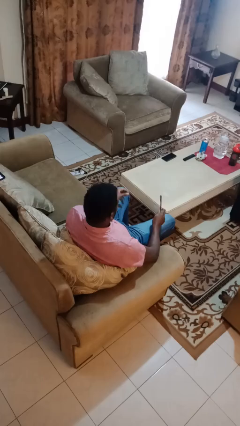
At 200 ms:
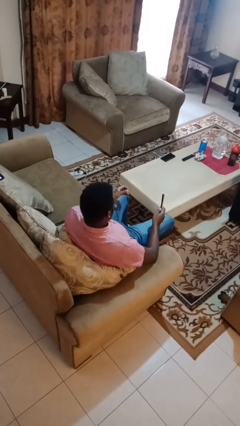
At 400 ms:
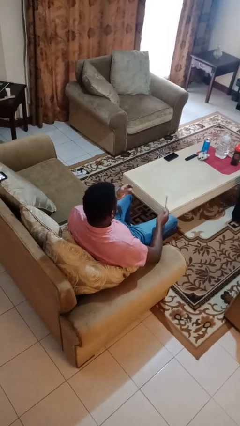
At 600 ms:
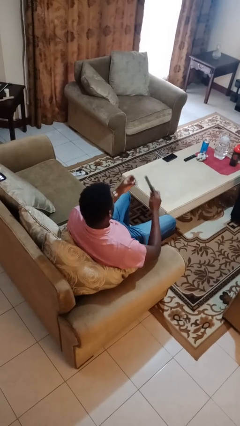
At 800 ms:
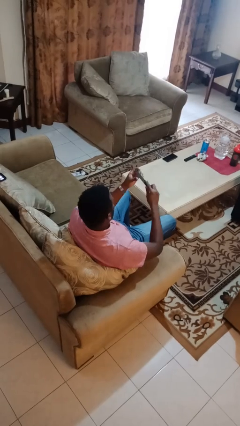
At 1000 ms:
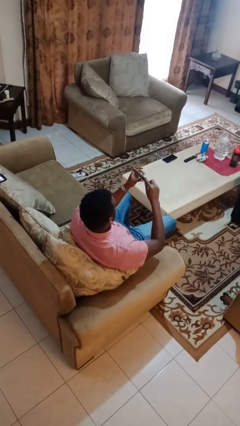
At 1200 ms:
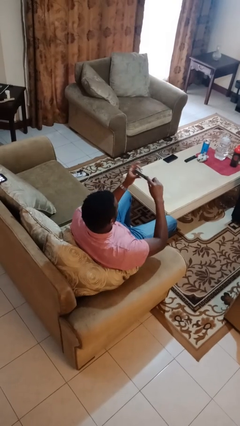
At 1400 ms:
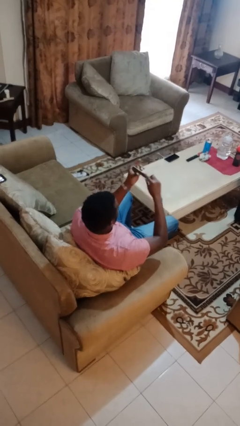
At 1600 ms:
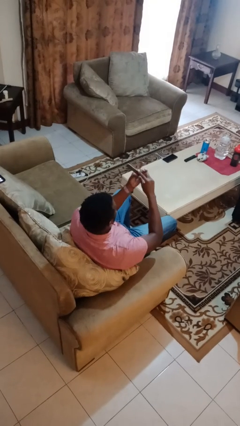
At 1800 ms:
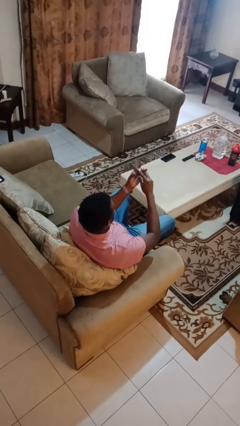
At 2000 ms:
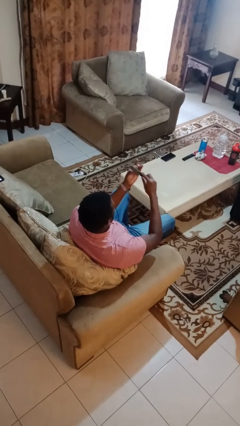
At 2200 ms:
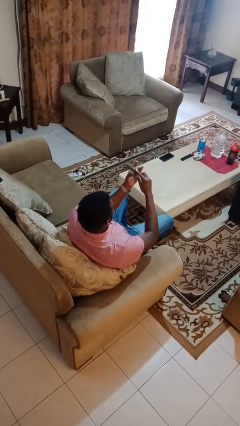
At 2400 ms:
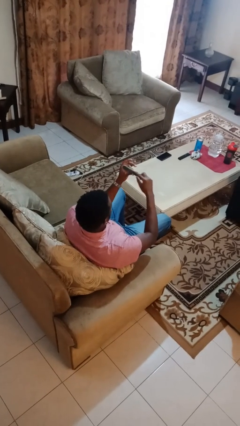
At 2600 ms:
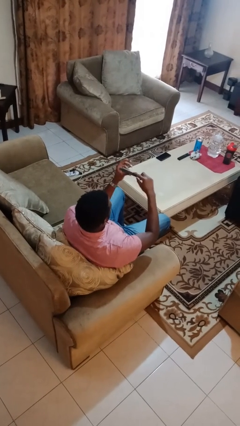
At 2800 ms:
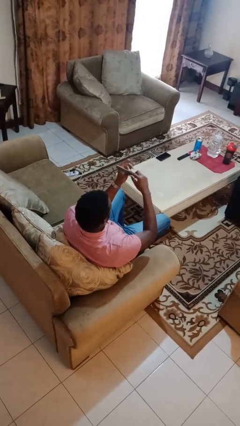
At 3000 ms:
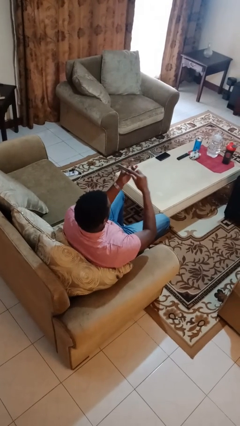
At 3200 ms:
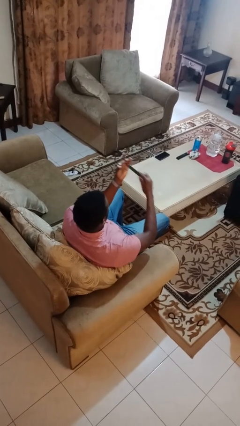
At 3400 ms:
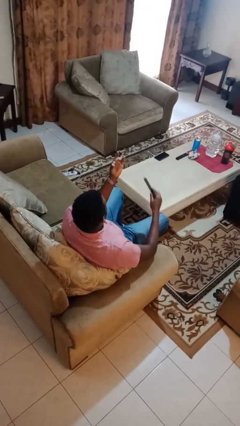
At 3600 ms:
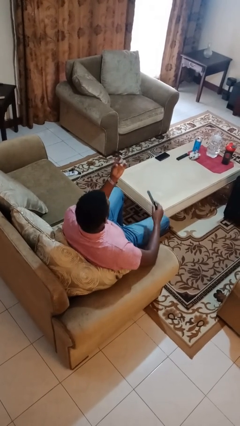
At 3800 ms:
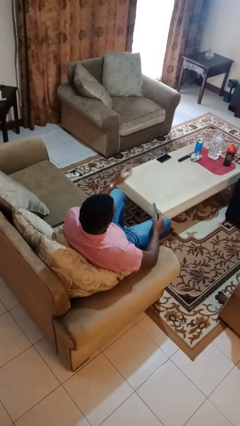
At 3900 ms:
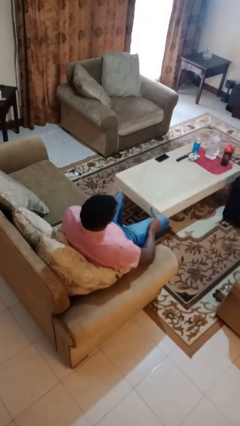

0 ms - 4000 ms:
person files fingernails

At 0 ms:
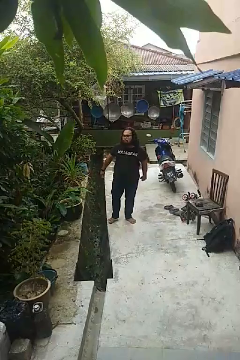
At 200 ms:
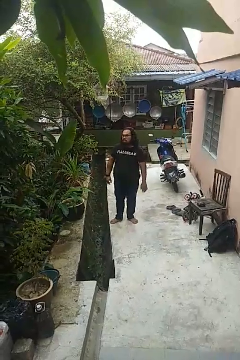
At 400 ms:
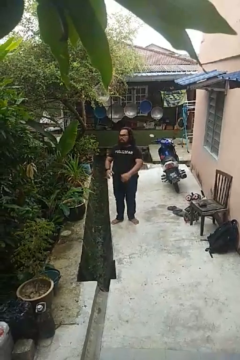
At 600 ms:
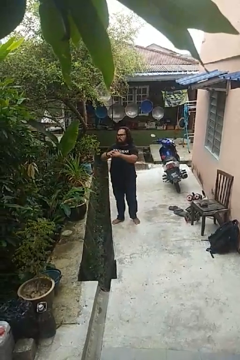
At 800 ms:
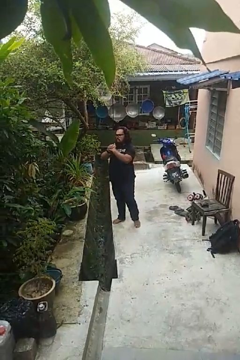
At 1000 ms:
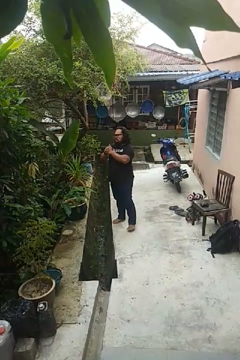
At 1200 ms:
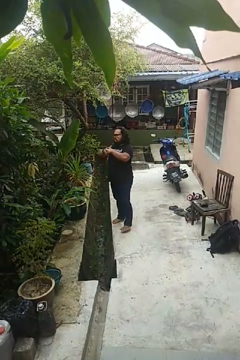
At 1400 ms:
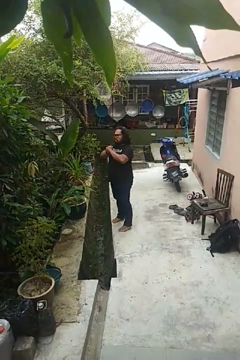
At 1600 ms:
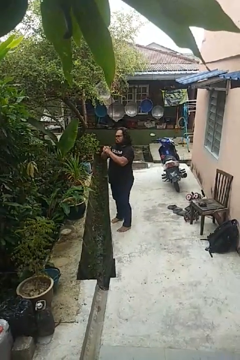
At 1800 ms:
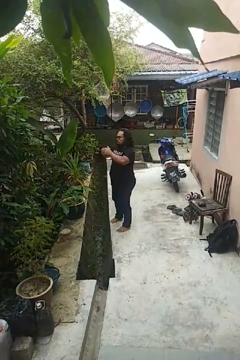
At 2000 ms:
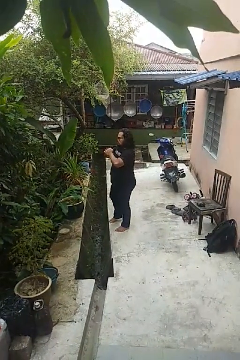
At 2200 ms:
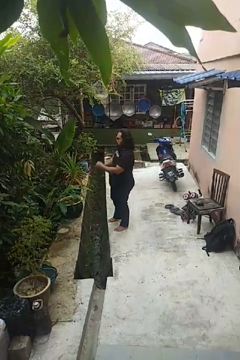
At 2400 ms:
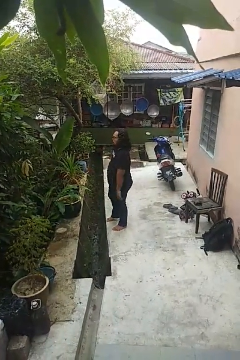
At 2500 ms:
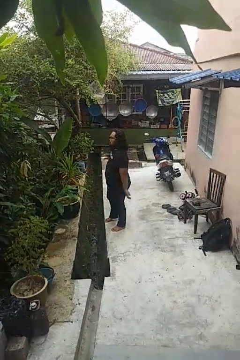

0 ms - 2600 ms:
person cracks knuckles

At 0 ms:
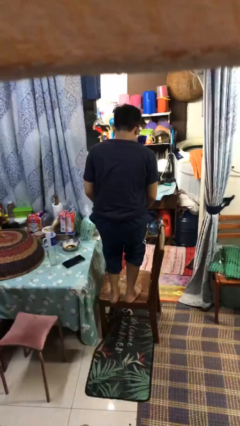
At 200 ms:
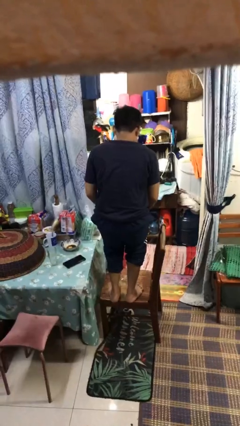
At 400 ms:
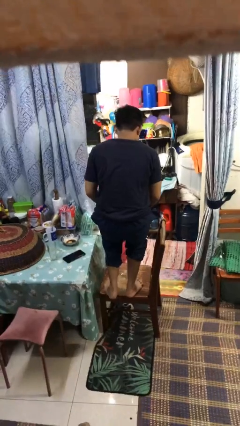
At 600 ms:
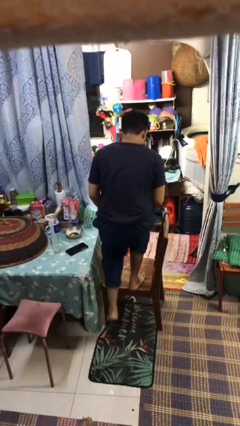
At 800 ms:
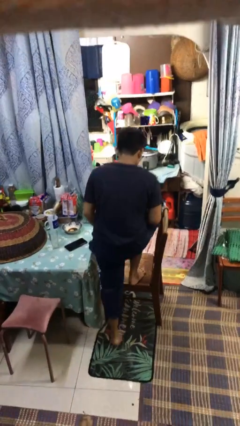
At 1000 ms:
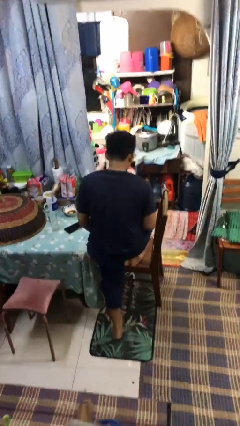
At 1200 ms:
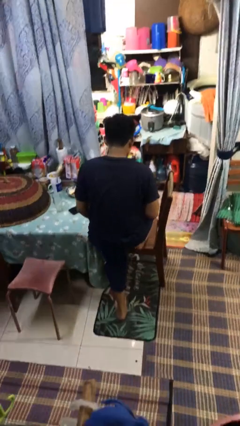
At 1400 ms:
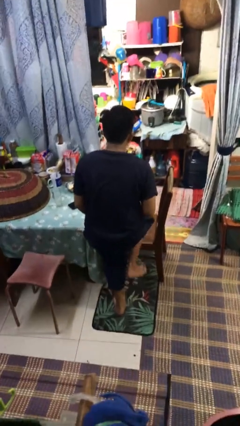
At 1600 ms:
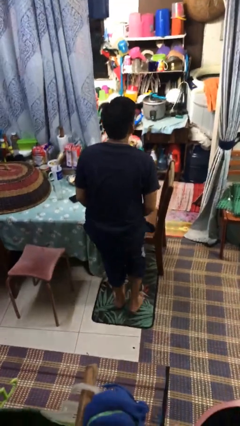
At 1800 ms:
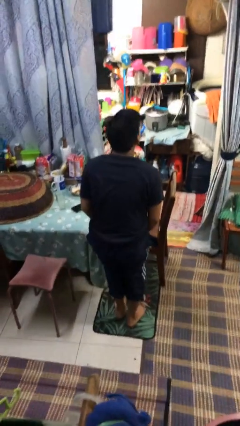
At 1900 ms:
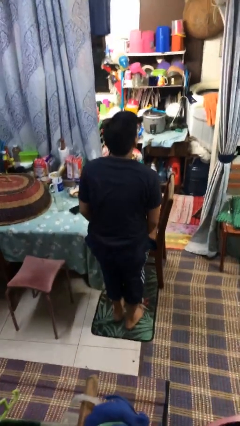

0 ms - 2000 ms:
person climbs off chair

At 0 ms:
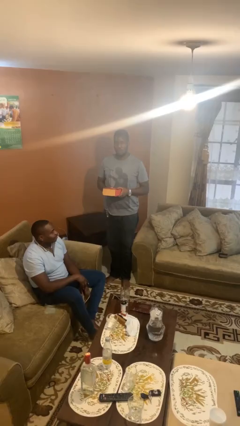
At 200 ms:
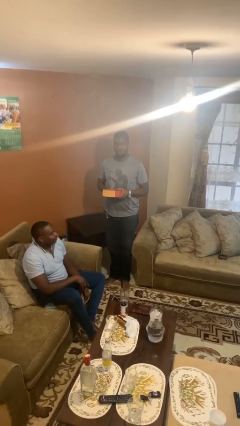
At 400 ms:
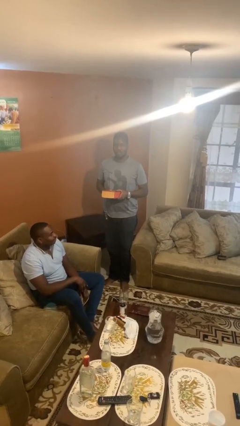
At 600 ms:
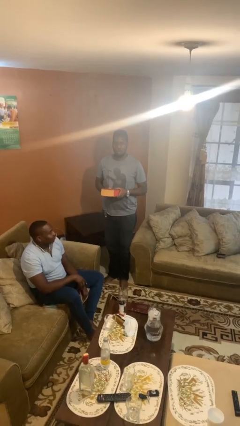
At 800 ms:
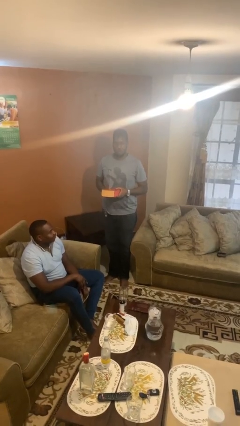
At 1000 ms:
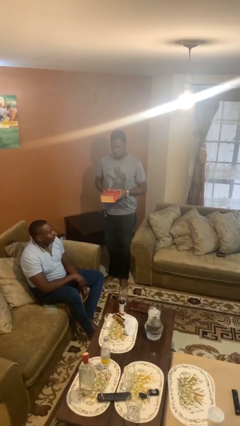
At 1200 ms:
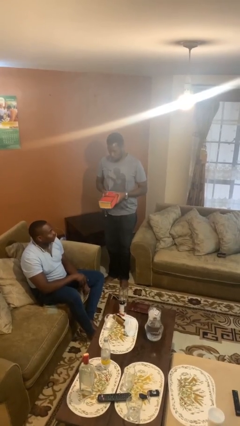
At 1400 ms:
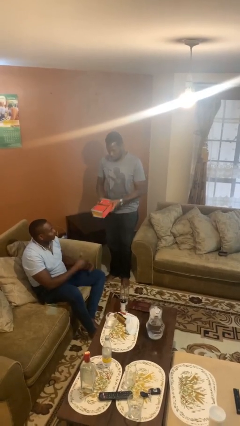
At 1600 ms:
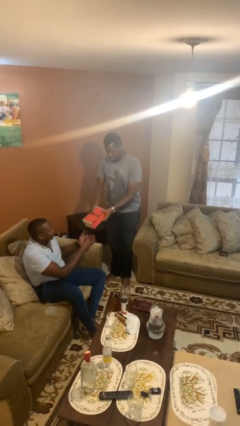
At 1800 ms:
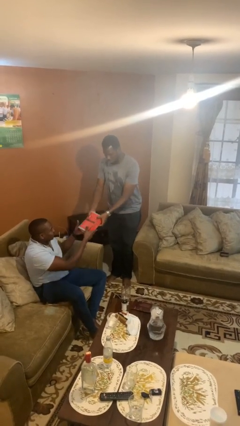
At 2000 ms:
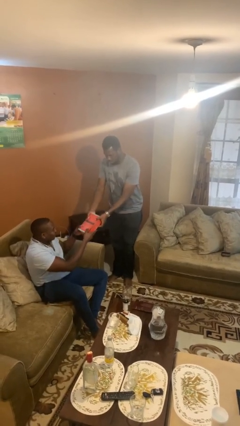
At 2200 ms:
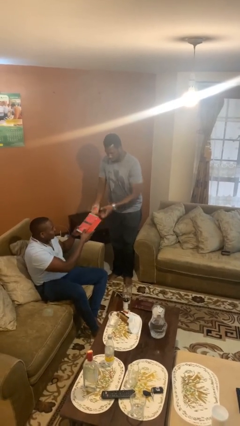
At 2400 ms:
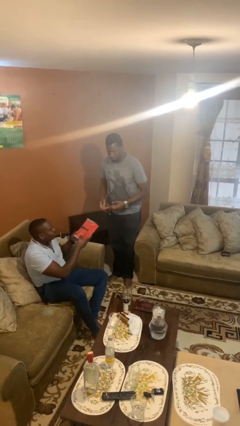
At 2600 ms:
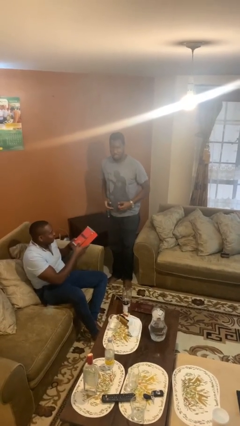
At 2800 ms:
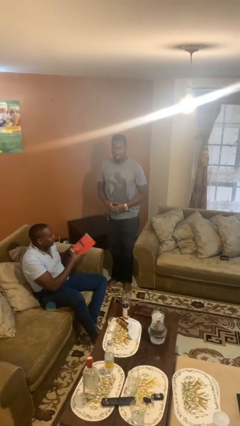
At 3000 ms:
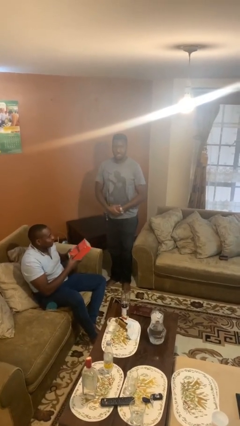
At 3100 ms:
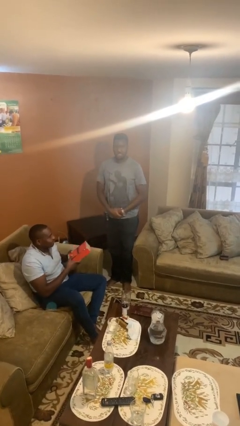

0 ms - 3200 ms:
person transfers object to person

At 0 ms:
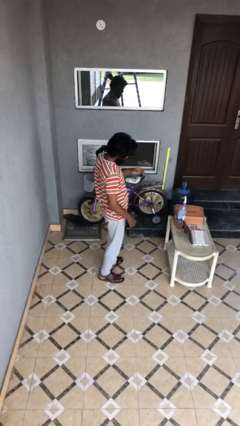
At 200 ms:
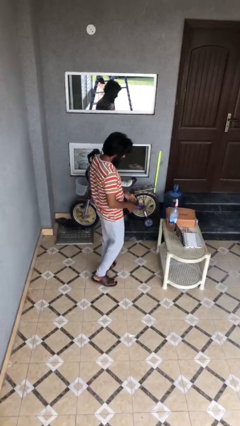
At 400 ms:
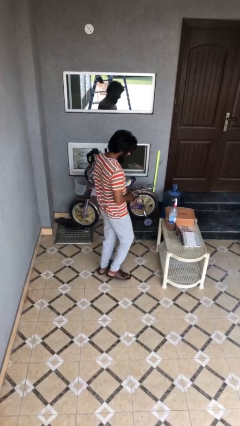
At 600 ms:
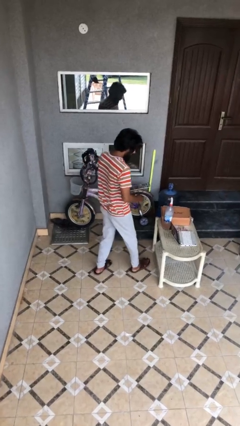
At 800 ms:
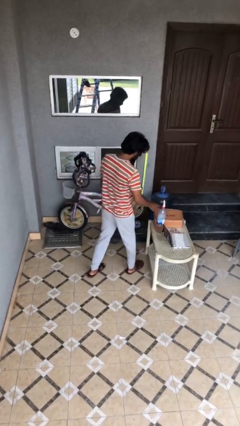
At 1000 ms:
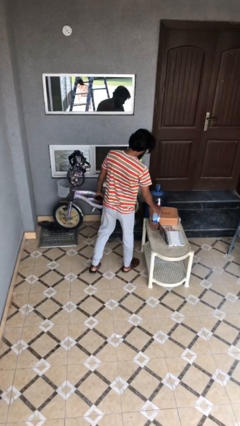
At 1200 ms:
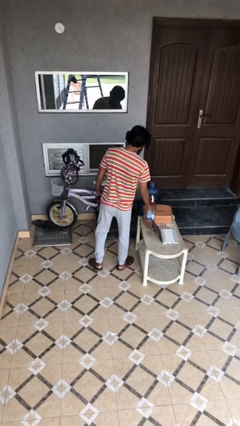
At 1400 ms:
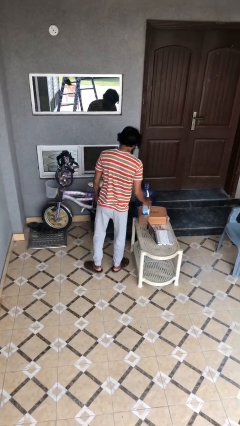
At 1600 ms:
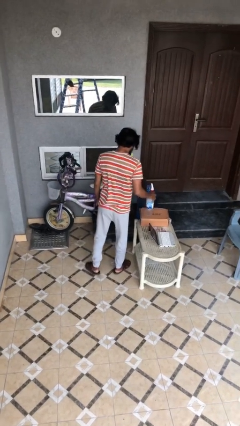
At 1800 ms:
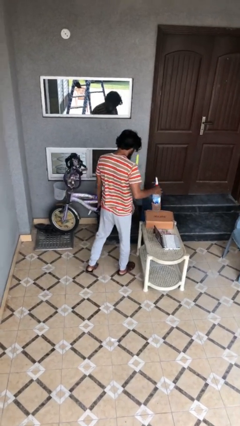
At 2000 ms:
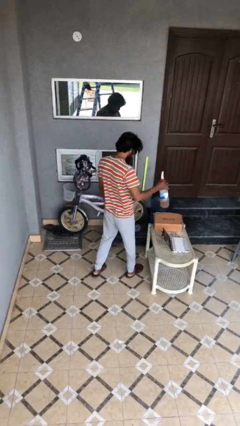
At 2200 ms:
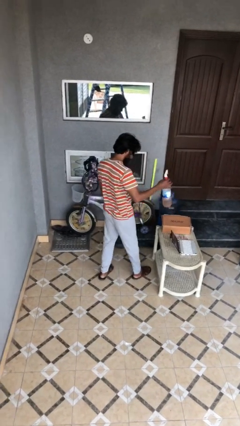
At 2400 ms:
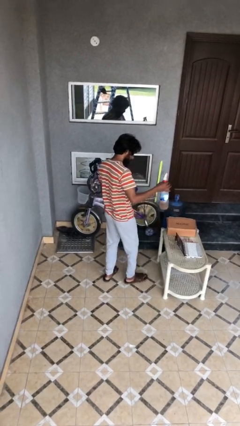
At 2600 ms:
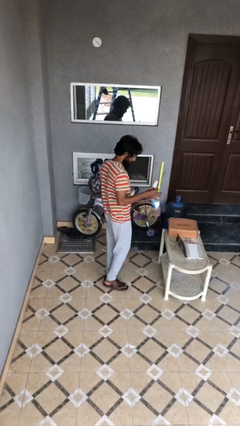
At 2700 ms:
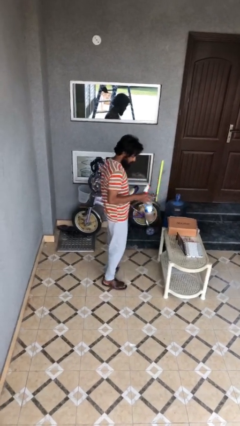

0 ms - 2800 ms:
person picks up object from table

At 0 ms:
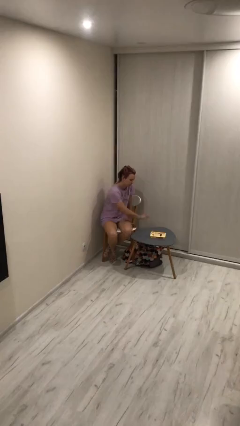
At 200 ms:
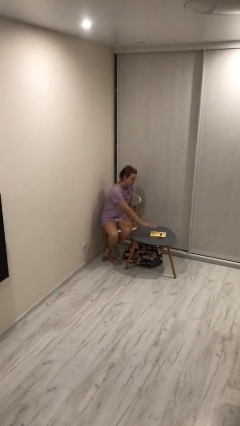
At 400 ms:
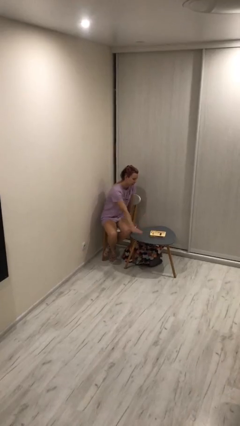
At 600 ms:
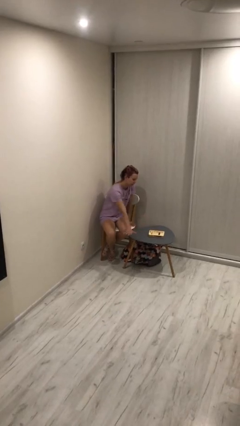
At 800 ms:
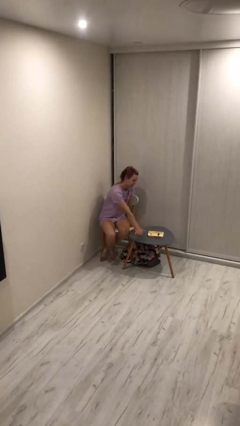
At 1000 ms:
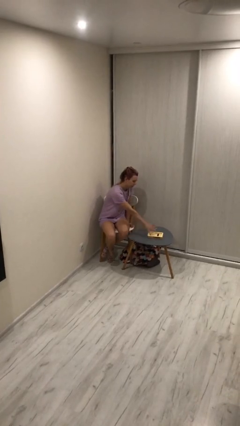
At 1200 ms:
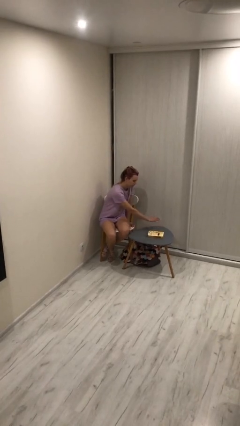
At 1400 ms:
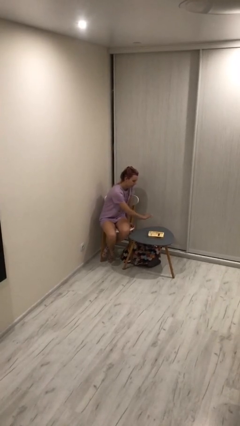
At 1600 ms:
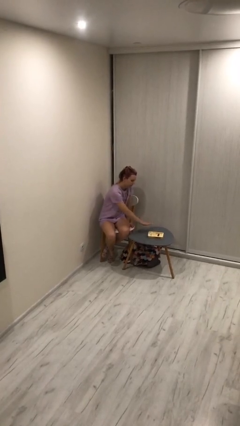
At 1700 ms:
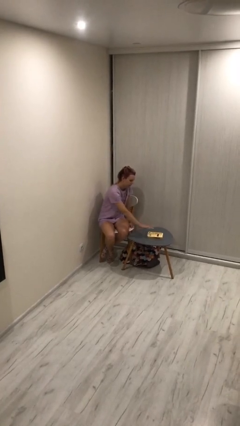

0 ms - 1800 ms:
person waves hand over object

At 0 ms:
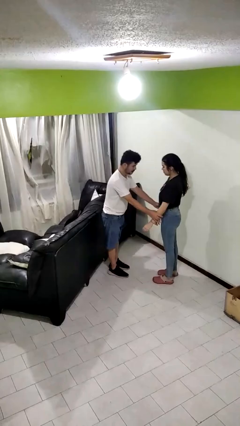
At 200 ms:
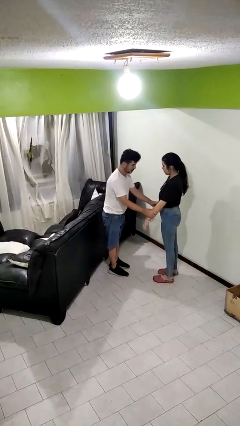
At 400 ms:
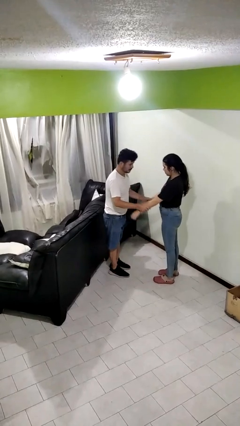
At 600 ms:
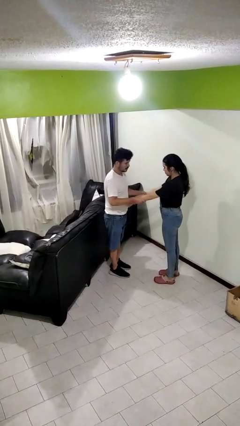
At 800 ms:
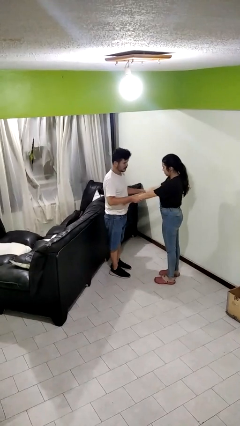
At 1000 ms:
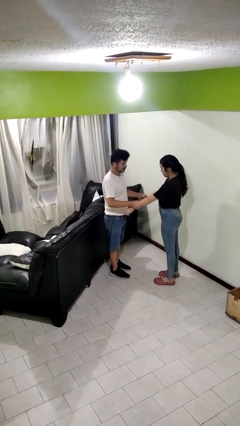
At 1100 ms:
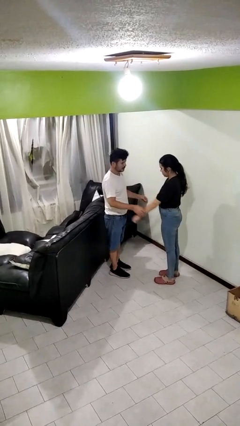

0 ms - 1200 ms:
person grabs person by forearm
